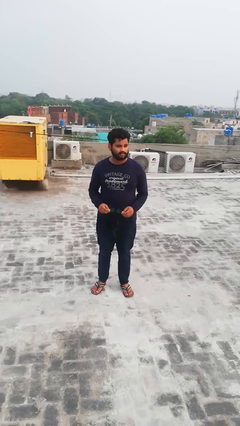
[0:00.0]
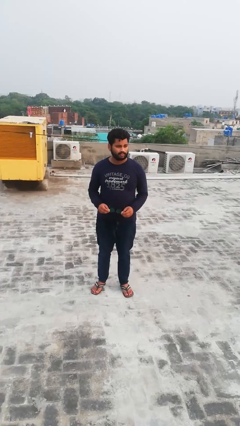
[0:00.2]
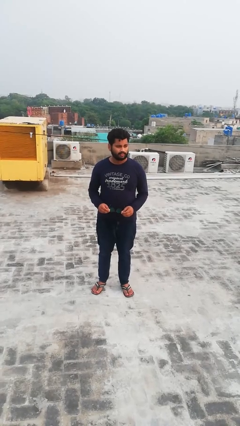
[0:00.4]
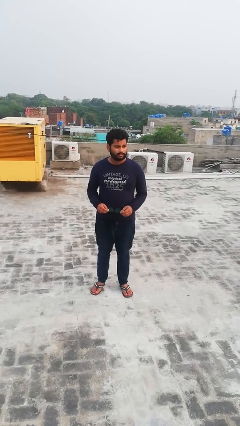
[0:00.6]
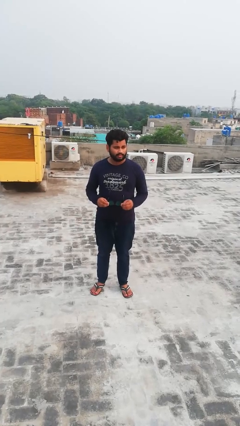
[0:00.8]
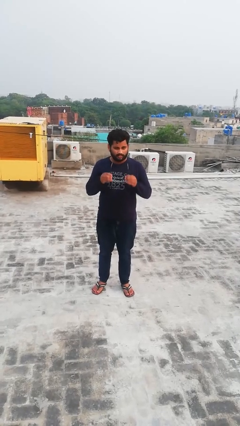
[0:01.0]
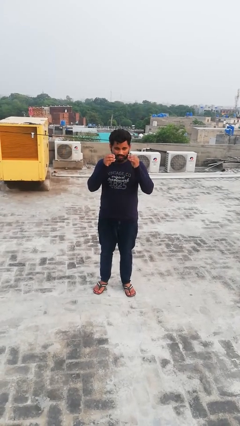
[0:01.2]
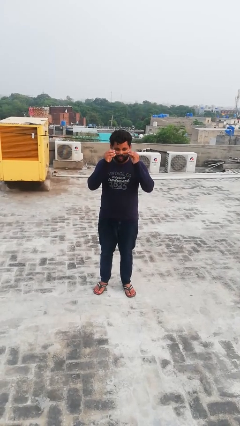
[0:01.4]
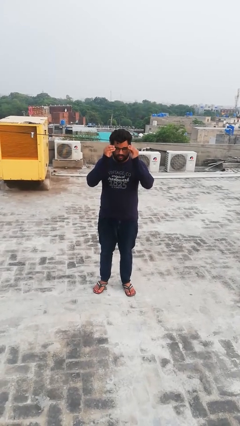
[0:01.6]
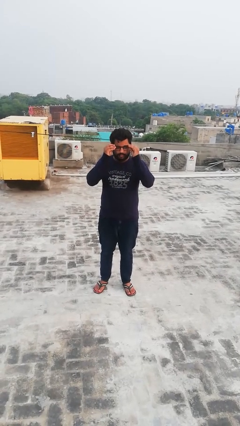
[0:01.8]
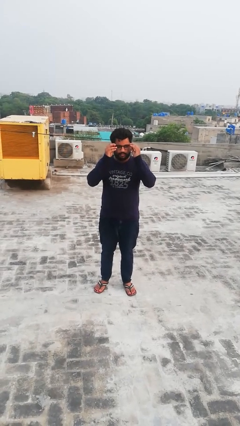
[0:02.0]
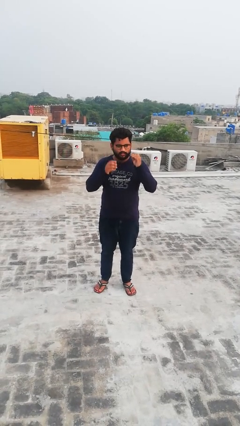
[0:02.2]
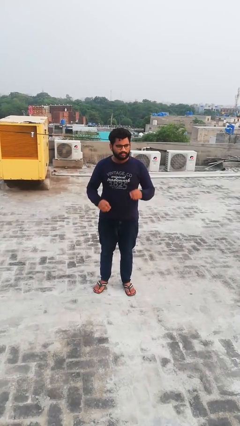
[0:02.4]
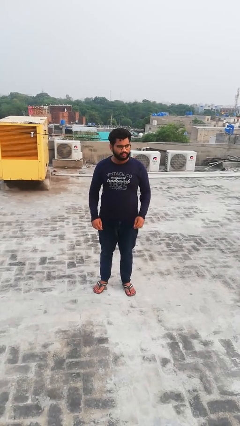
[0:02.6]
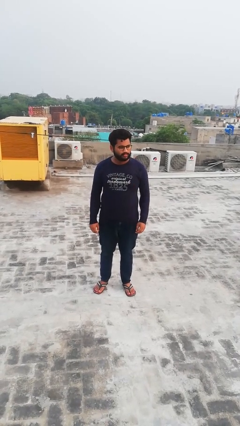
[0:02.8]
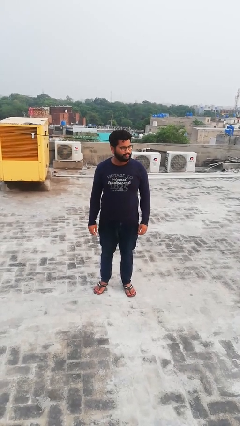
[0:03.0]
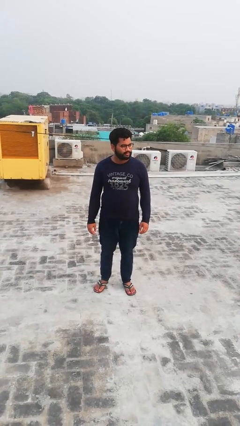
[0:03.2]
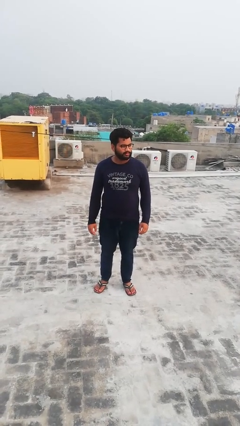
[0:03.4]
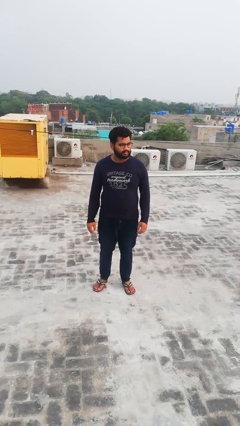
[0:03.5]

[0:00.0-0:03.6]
person puts on glasses

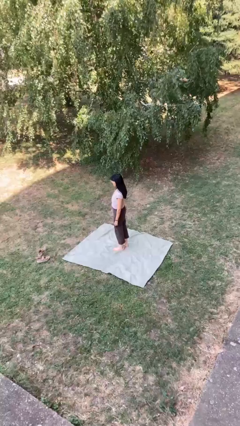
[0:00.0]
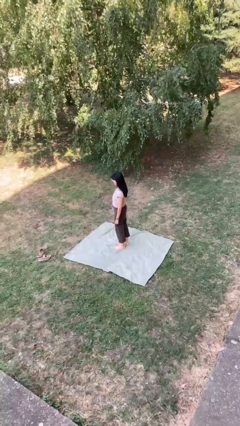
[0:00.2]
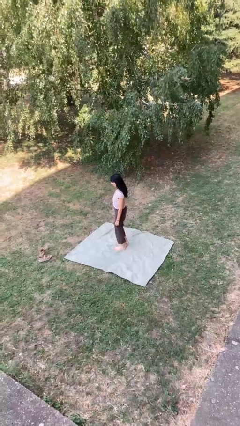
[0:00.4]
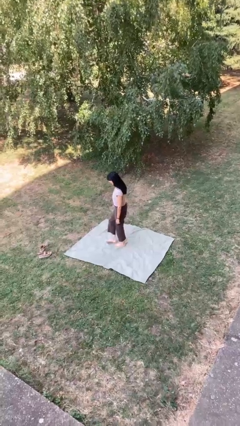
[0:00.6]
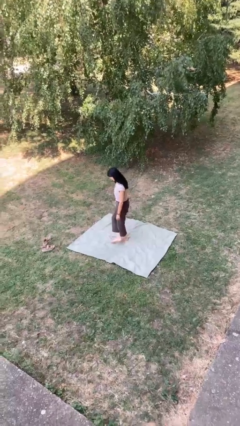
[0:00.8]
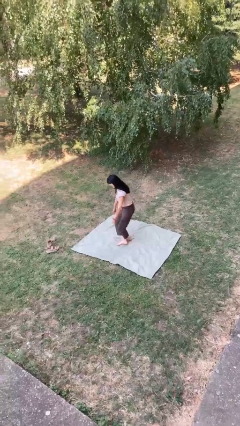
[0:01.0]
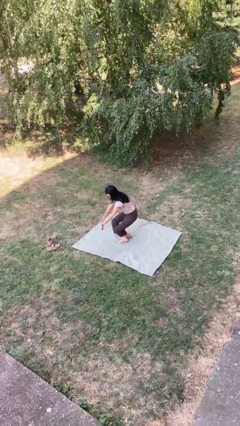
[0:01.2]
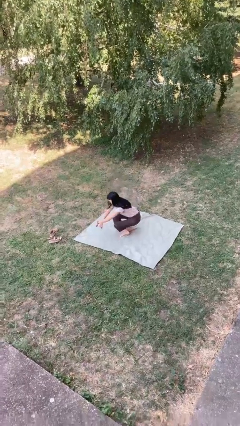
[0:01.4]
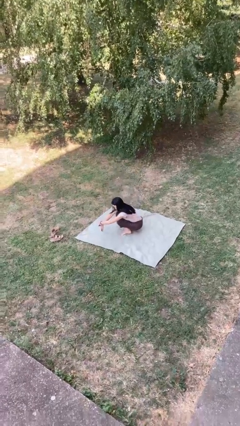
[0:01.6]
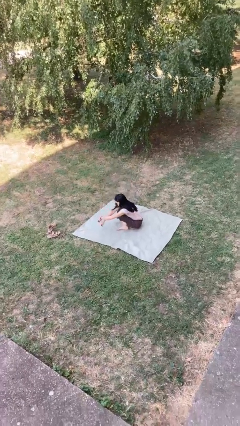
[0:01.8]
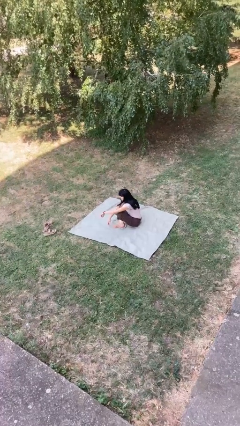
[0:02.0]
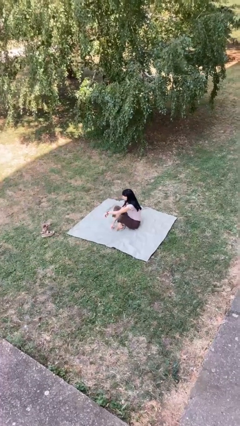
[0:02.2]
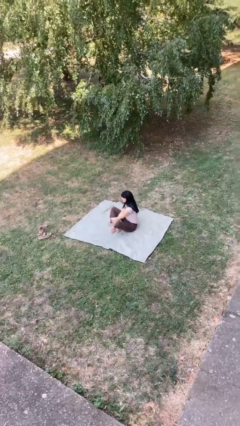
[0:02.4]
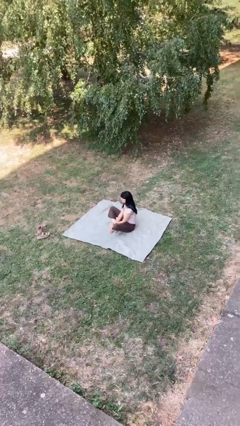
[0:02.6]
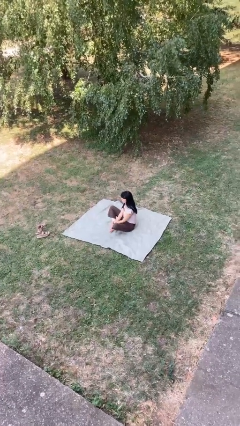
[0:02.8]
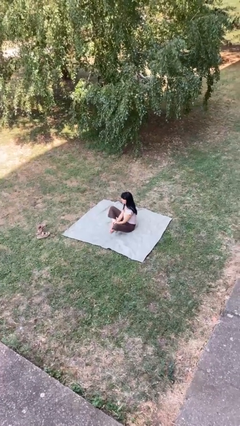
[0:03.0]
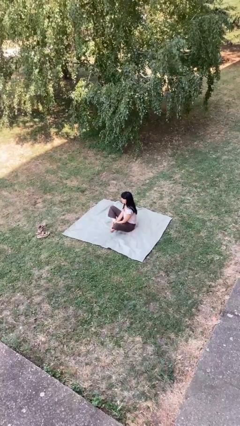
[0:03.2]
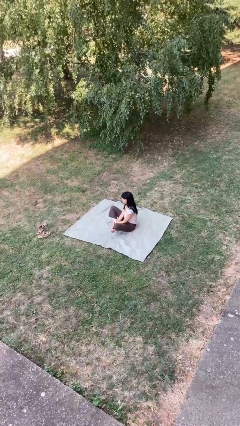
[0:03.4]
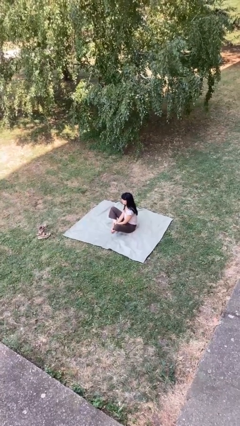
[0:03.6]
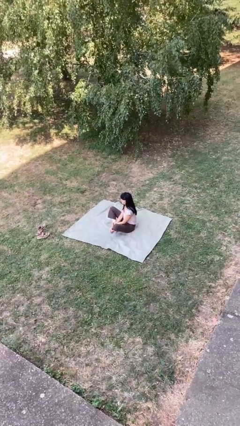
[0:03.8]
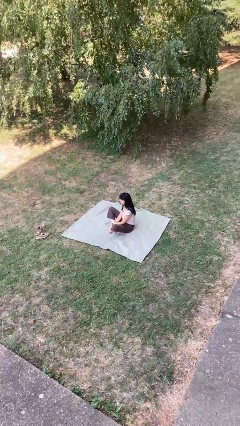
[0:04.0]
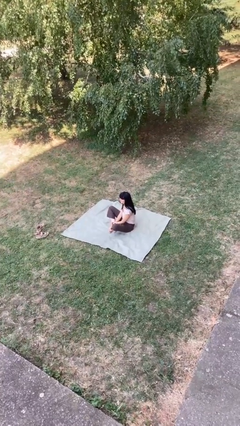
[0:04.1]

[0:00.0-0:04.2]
person sits crisscross

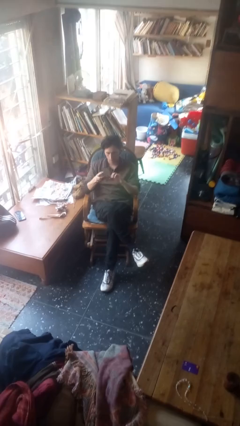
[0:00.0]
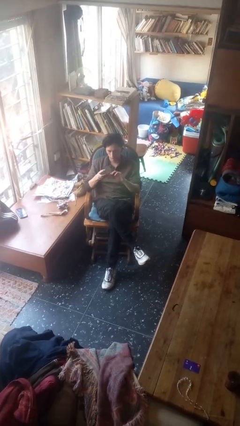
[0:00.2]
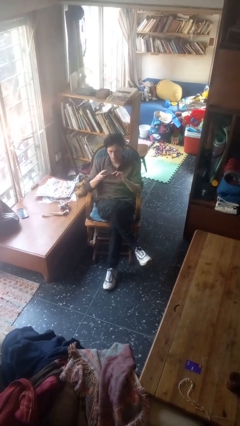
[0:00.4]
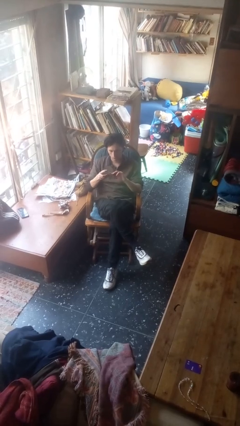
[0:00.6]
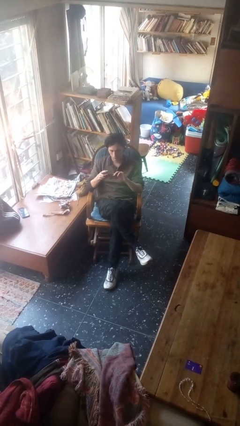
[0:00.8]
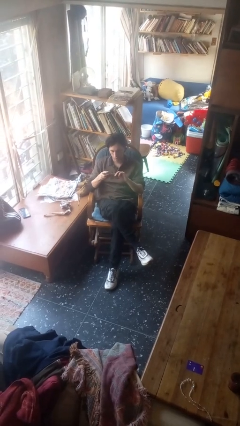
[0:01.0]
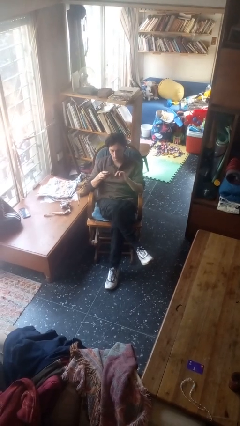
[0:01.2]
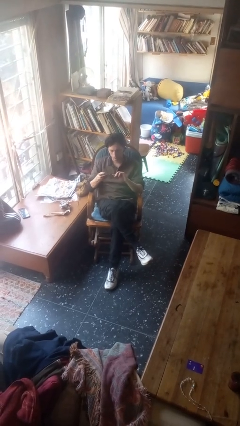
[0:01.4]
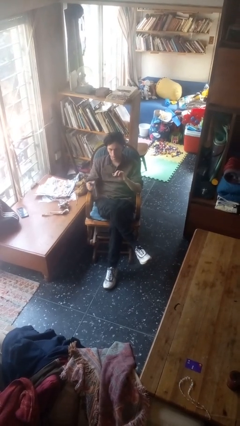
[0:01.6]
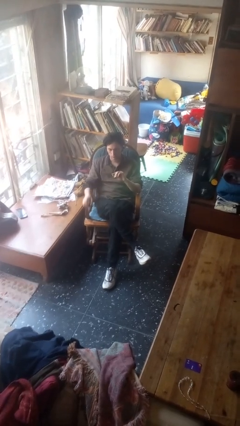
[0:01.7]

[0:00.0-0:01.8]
person clips fingernails

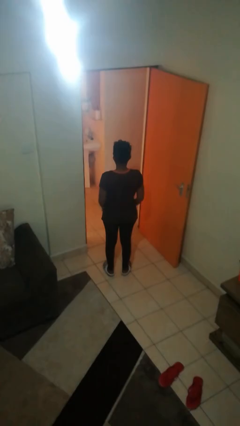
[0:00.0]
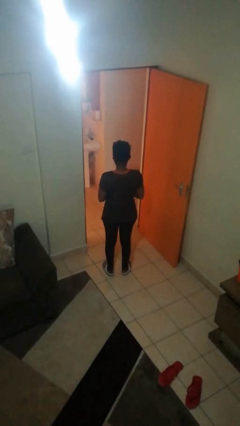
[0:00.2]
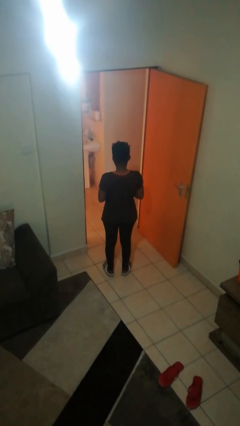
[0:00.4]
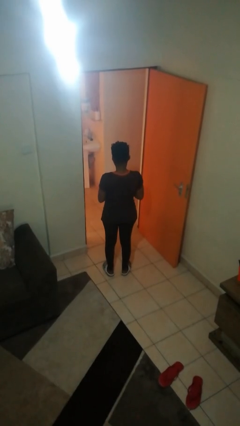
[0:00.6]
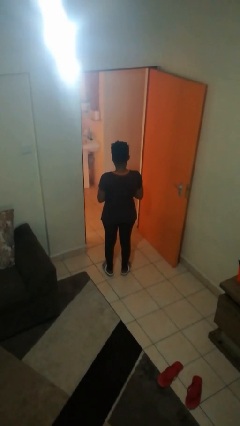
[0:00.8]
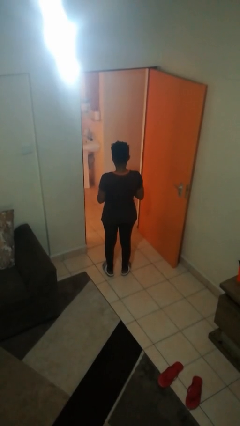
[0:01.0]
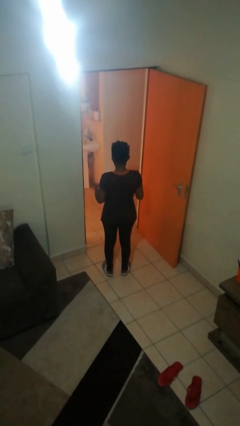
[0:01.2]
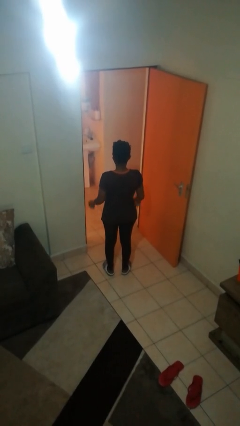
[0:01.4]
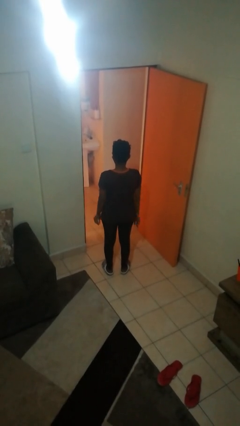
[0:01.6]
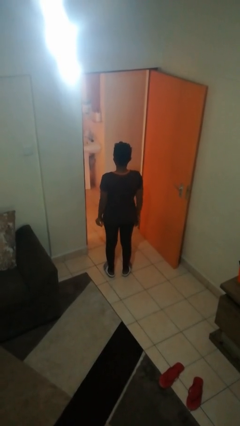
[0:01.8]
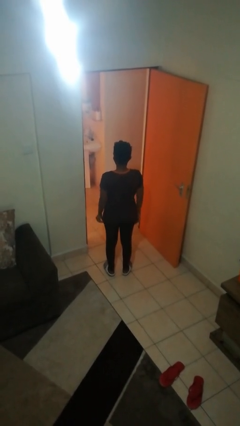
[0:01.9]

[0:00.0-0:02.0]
person takes off ring

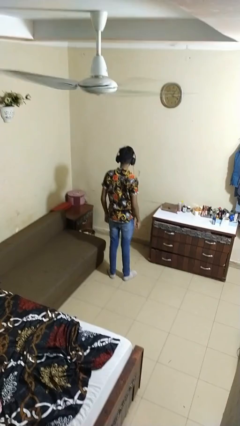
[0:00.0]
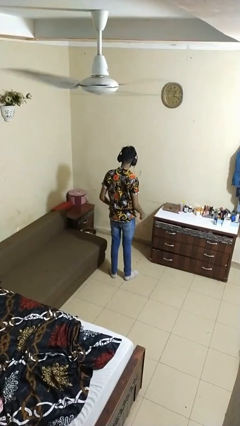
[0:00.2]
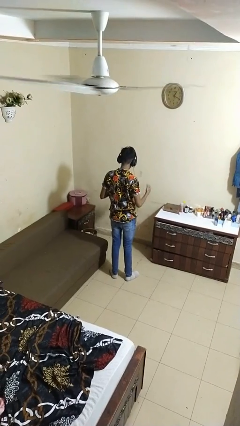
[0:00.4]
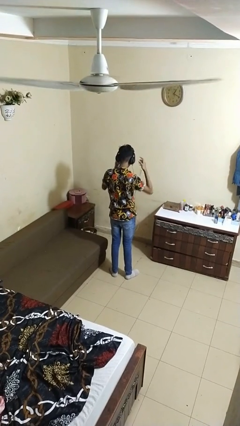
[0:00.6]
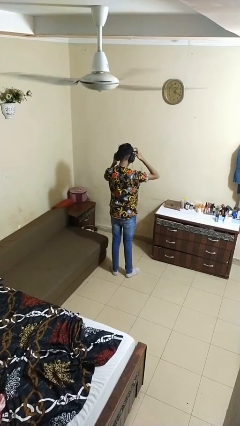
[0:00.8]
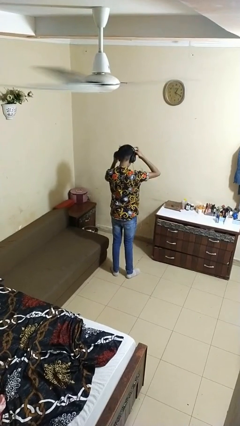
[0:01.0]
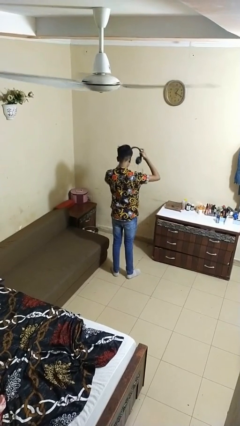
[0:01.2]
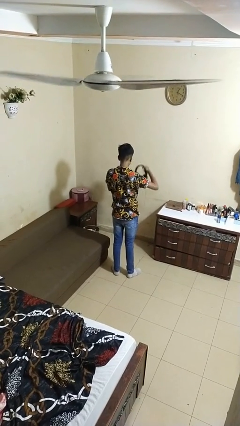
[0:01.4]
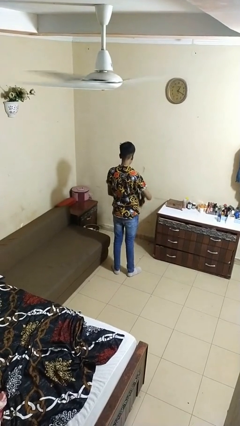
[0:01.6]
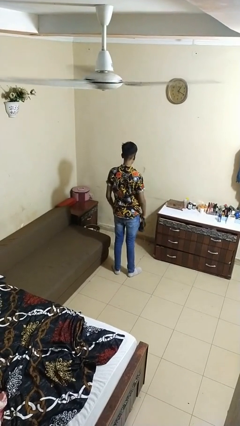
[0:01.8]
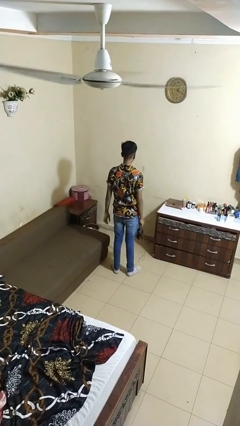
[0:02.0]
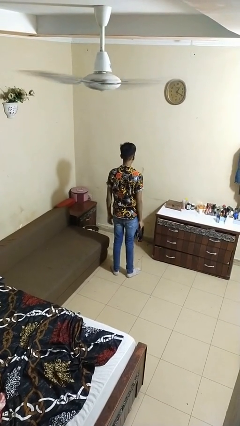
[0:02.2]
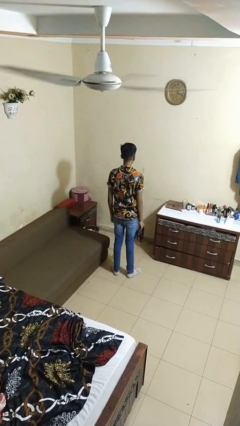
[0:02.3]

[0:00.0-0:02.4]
person takes off headphones

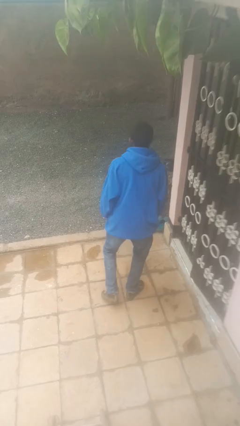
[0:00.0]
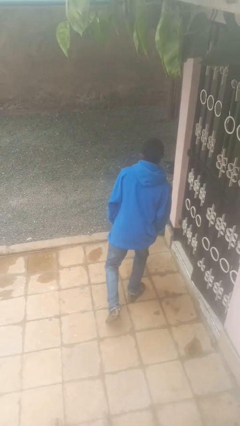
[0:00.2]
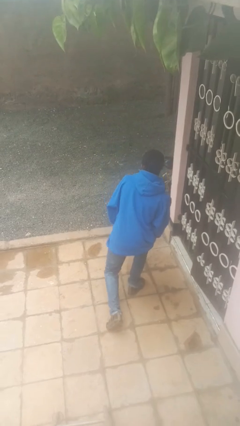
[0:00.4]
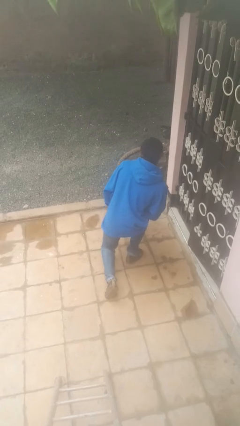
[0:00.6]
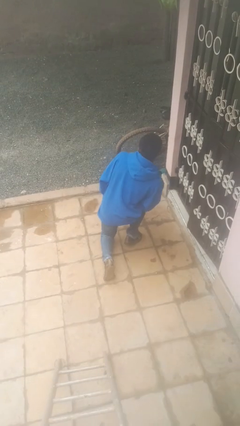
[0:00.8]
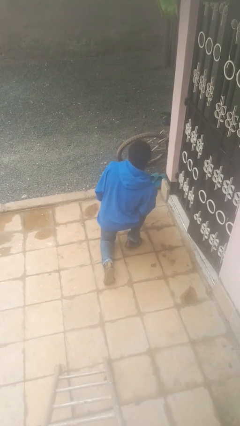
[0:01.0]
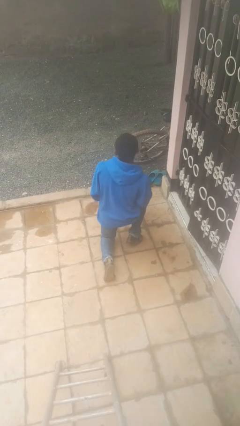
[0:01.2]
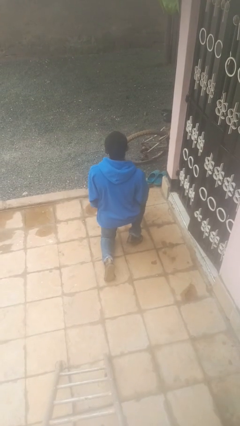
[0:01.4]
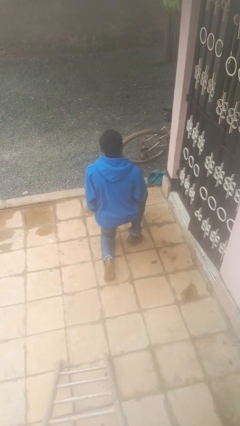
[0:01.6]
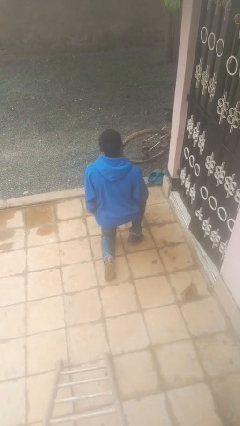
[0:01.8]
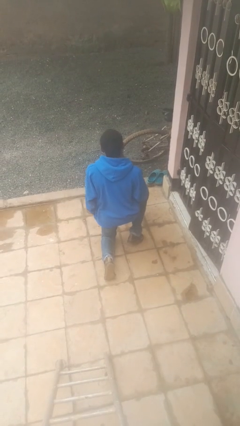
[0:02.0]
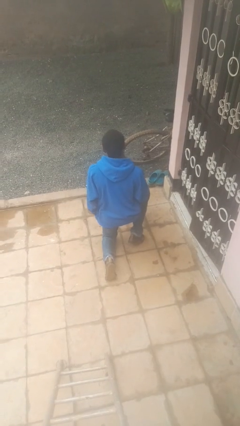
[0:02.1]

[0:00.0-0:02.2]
person kneels

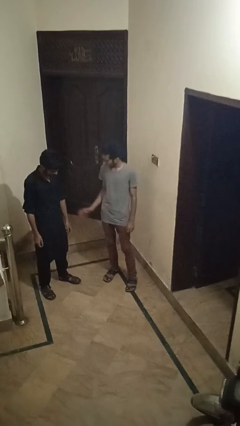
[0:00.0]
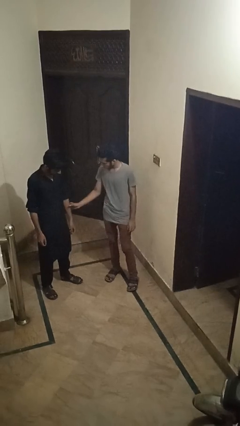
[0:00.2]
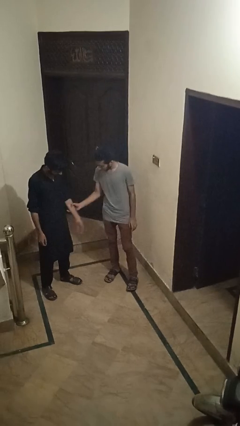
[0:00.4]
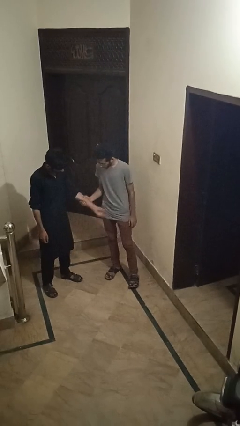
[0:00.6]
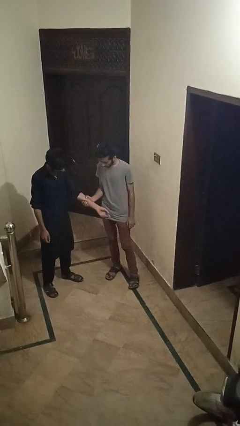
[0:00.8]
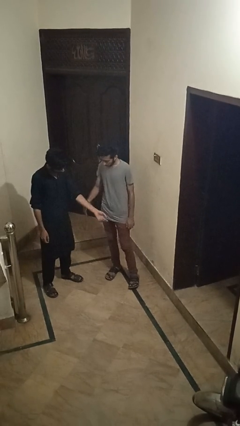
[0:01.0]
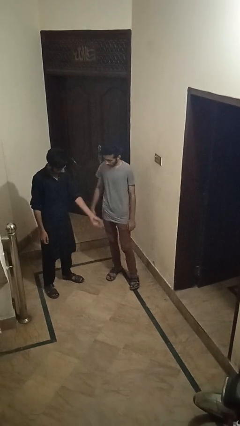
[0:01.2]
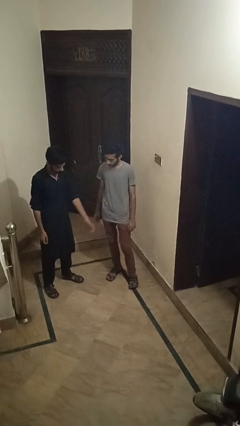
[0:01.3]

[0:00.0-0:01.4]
person grabs person by forearm
